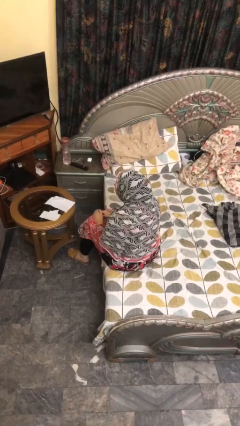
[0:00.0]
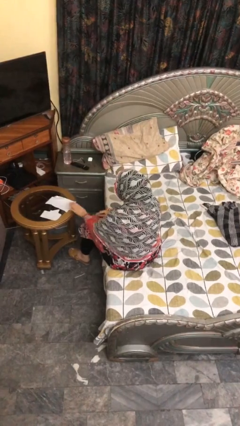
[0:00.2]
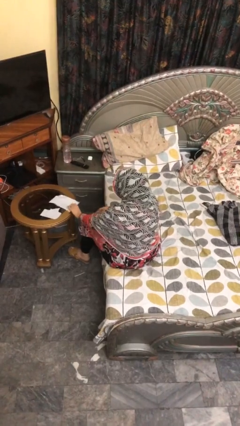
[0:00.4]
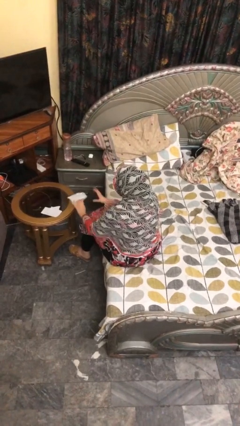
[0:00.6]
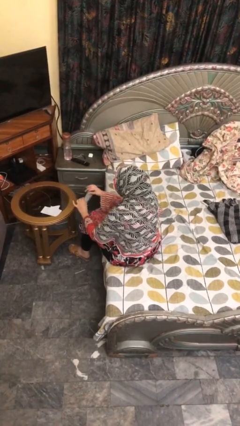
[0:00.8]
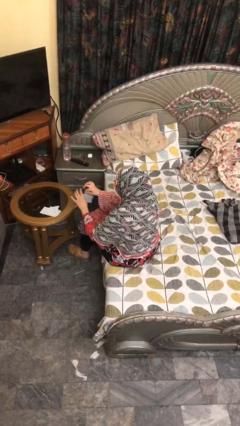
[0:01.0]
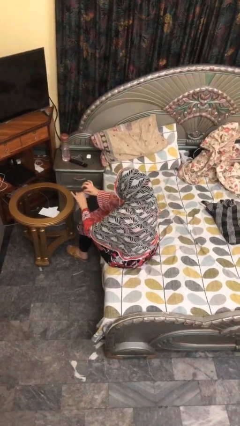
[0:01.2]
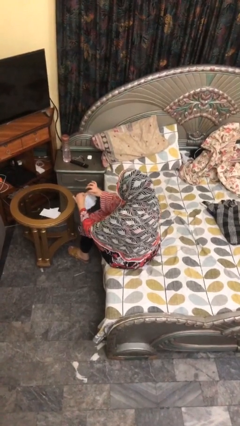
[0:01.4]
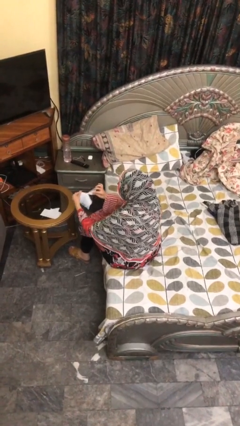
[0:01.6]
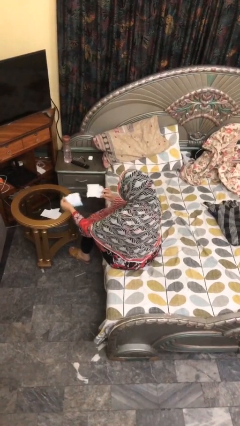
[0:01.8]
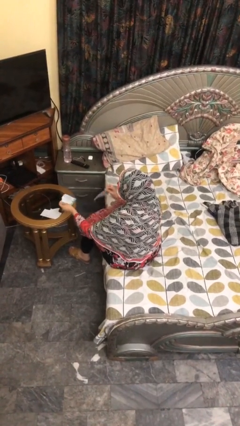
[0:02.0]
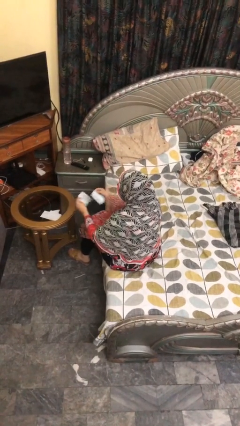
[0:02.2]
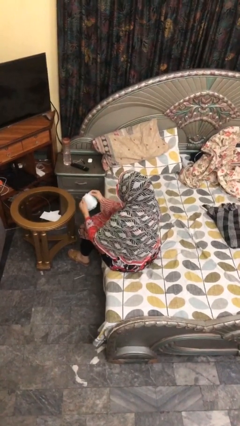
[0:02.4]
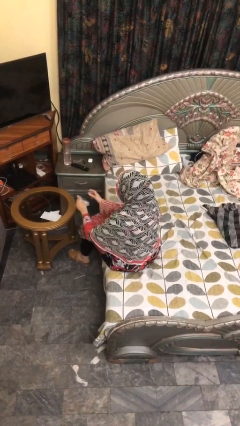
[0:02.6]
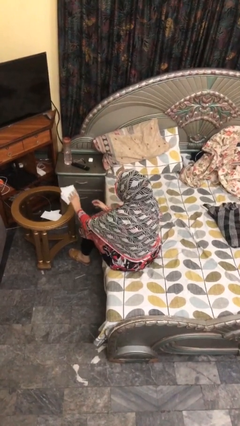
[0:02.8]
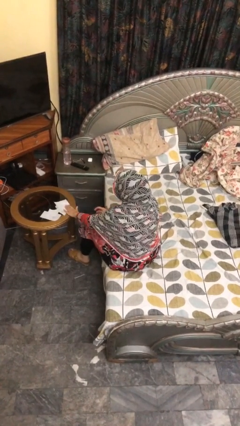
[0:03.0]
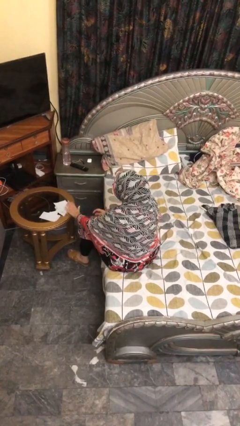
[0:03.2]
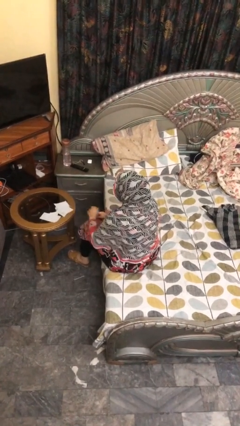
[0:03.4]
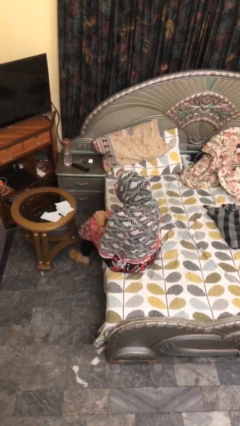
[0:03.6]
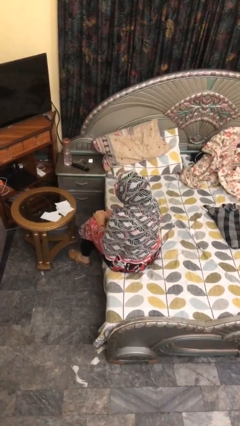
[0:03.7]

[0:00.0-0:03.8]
person tears paper

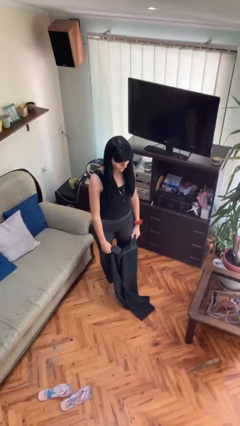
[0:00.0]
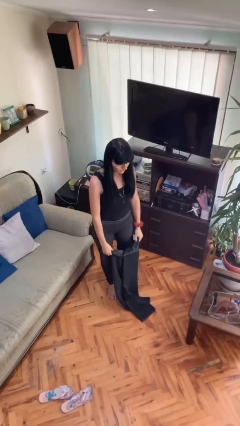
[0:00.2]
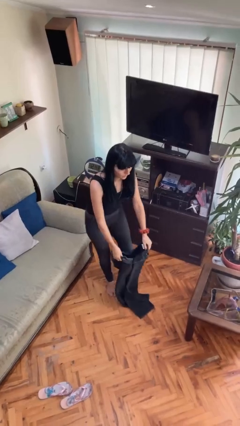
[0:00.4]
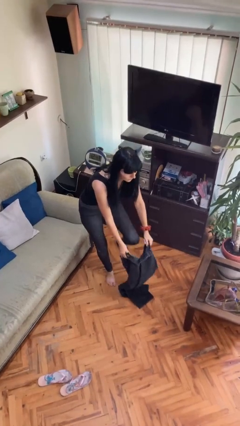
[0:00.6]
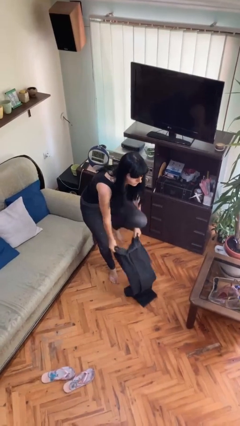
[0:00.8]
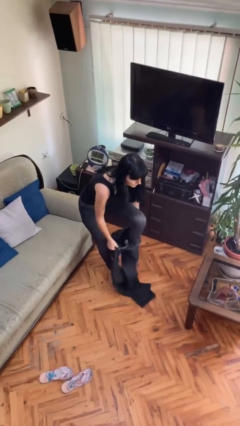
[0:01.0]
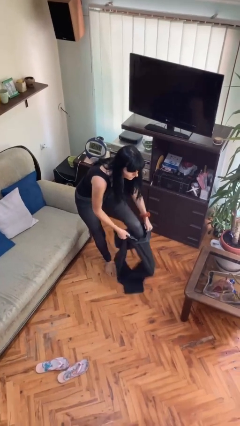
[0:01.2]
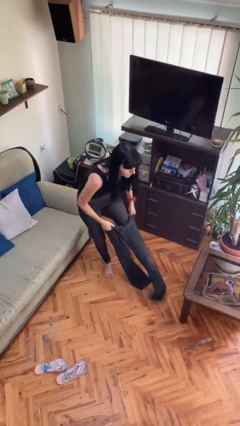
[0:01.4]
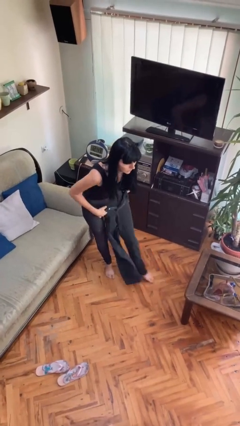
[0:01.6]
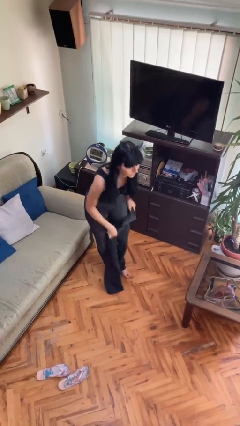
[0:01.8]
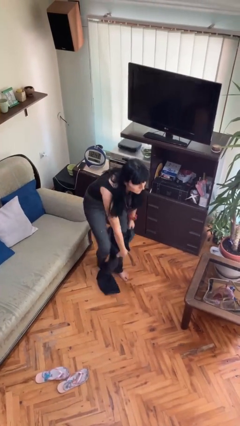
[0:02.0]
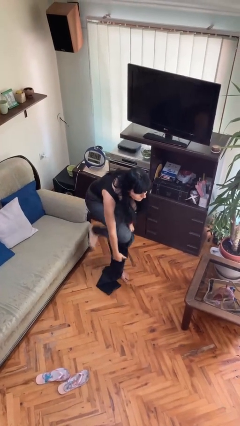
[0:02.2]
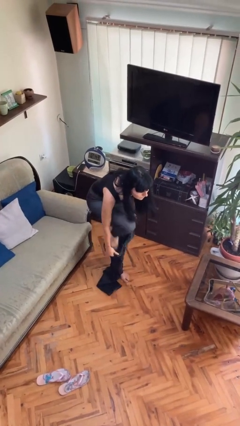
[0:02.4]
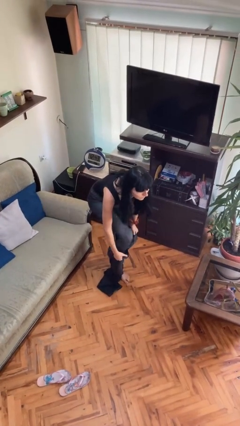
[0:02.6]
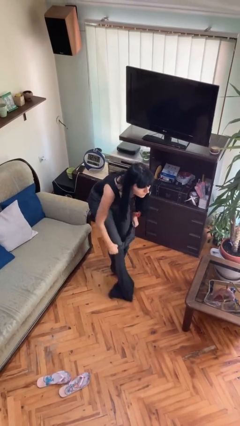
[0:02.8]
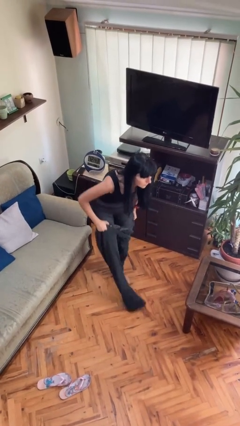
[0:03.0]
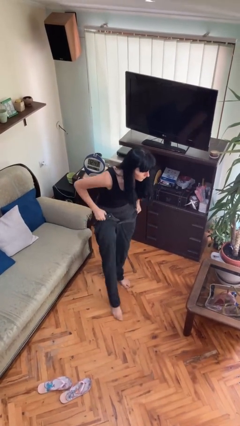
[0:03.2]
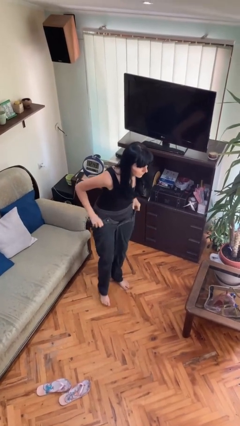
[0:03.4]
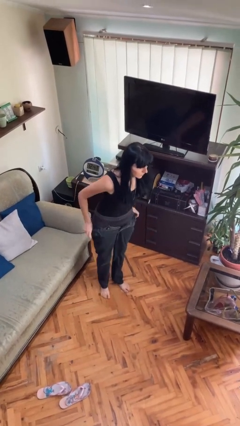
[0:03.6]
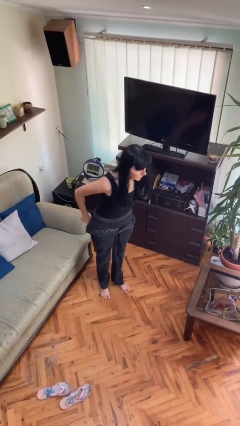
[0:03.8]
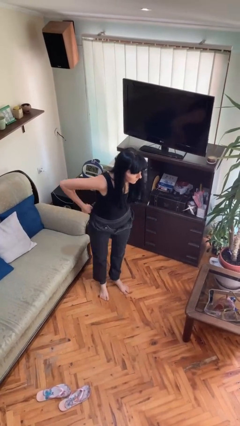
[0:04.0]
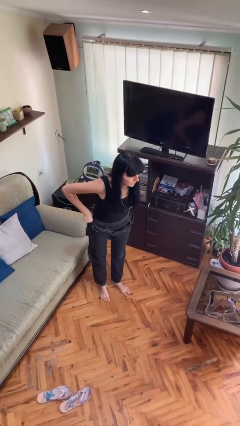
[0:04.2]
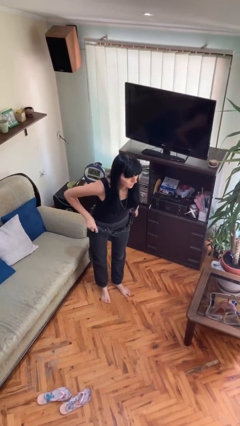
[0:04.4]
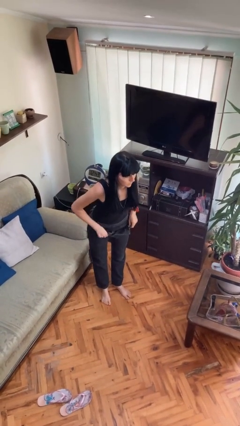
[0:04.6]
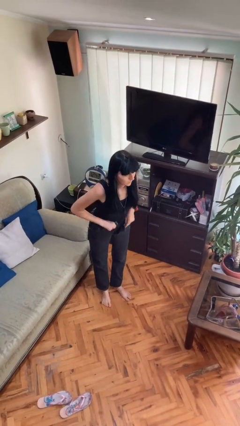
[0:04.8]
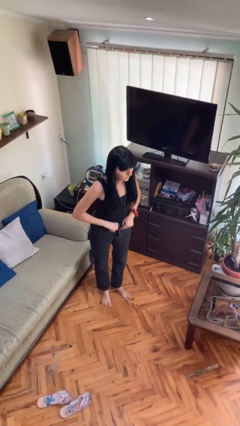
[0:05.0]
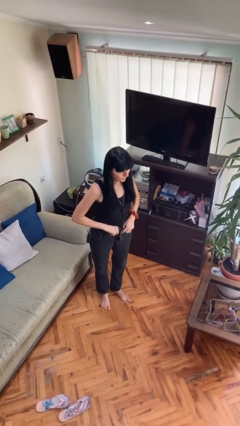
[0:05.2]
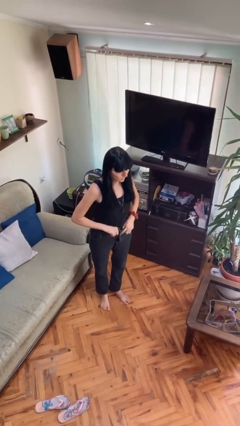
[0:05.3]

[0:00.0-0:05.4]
person puts on pants

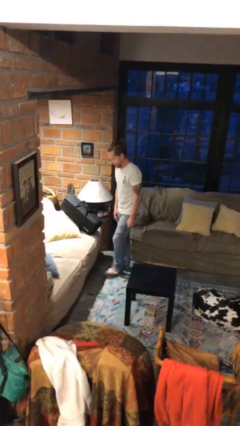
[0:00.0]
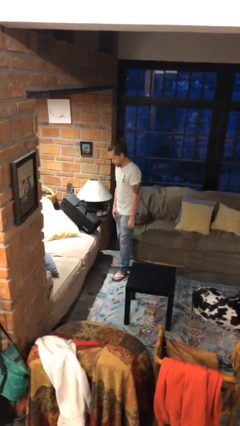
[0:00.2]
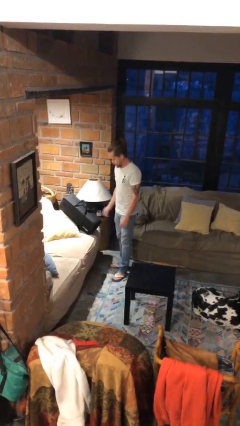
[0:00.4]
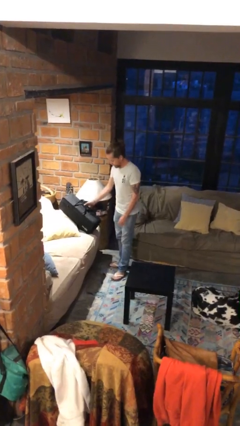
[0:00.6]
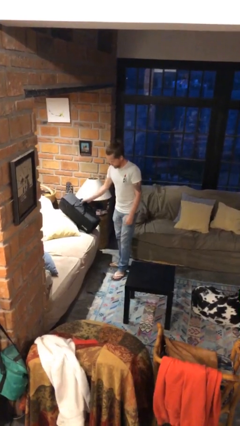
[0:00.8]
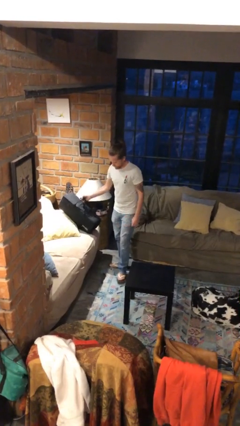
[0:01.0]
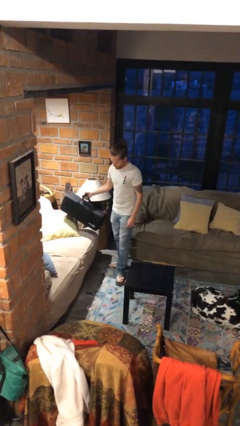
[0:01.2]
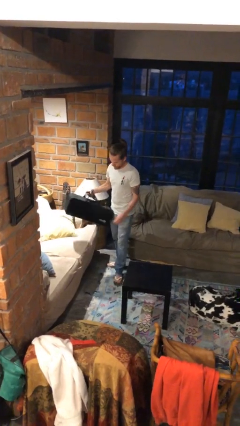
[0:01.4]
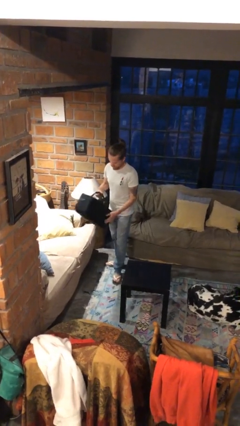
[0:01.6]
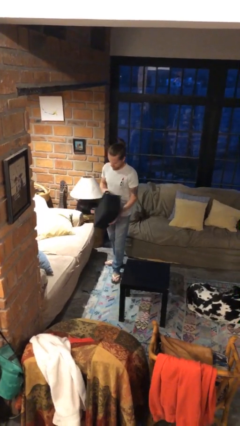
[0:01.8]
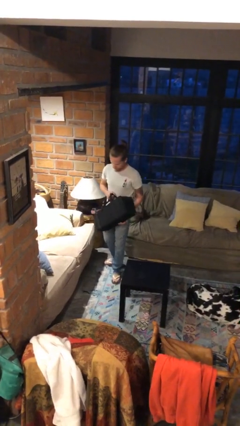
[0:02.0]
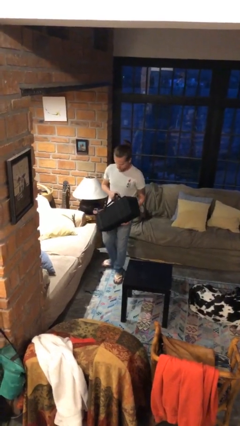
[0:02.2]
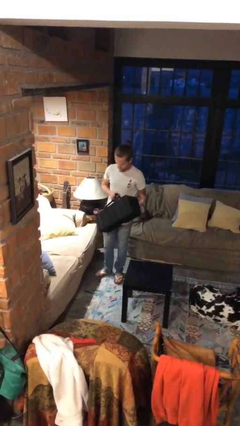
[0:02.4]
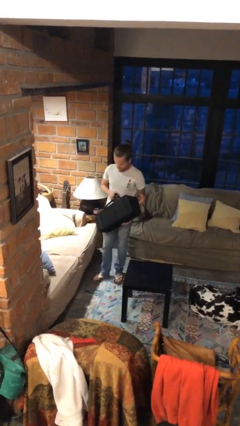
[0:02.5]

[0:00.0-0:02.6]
person picks up object from couch

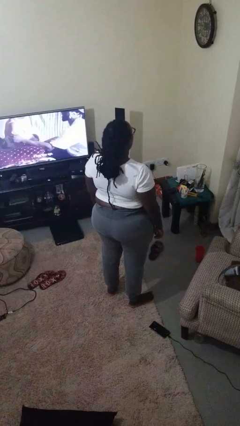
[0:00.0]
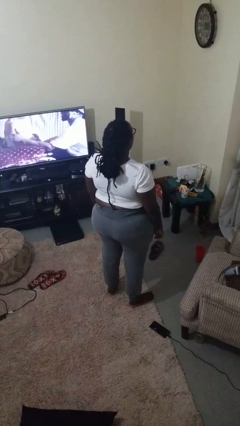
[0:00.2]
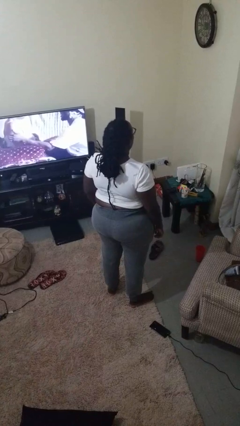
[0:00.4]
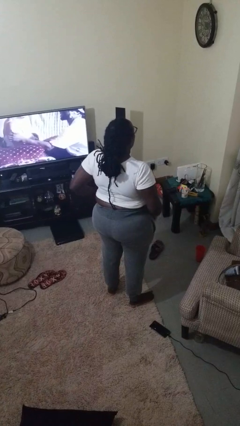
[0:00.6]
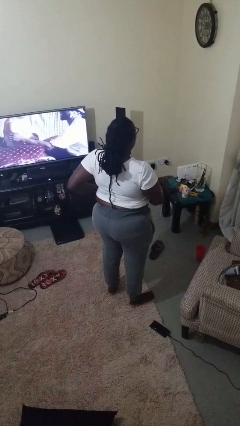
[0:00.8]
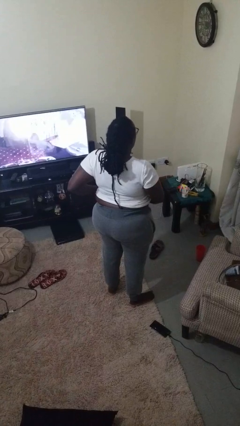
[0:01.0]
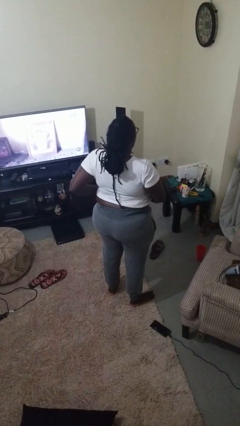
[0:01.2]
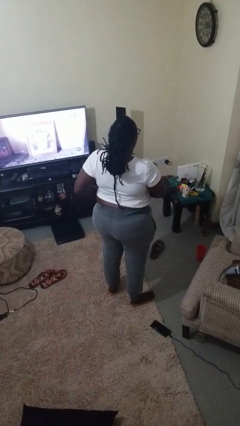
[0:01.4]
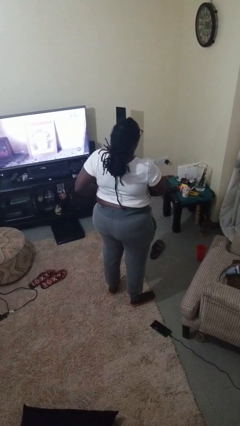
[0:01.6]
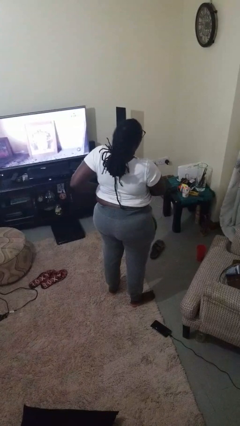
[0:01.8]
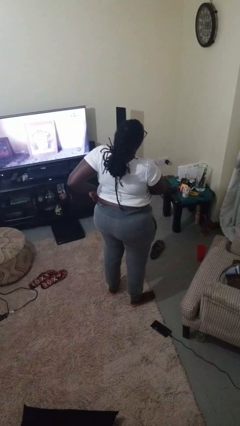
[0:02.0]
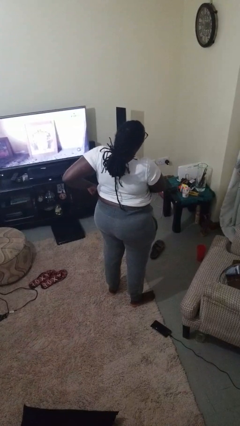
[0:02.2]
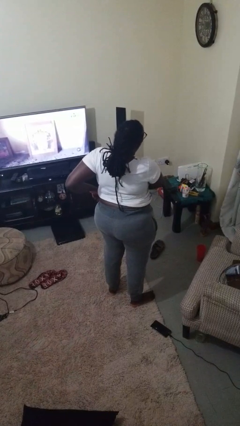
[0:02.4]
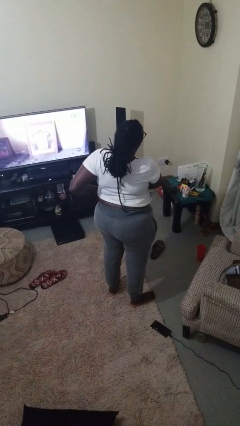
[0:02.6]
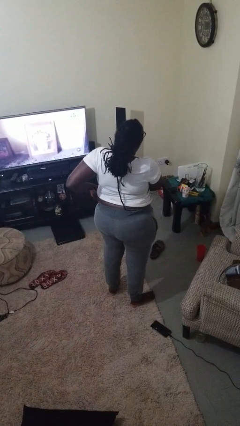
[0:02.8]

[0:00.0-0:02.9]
person hikes up pants

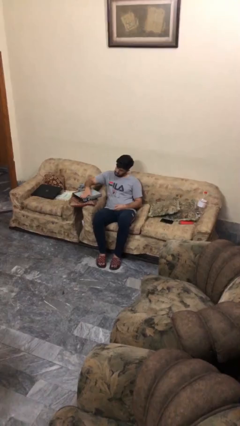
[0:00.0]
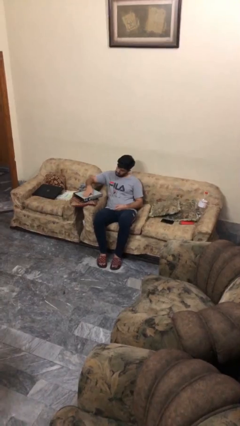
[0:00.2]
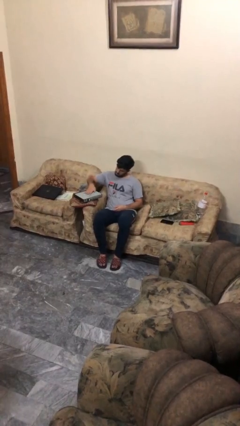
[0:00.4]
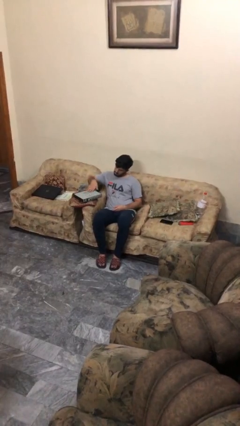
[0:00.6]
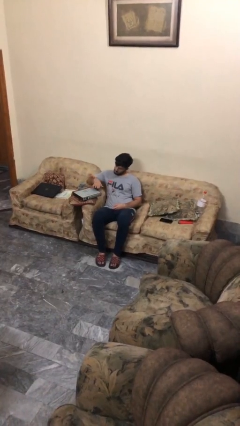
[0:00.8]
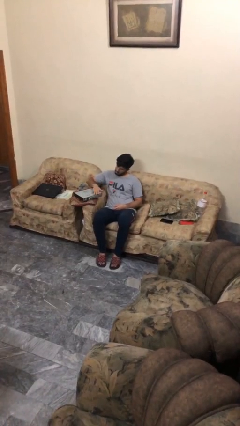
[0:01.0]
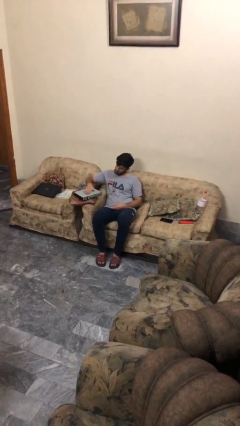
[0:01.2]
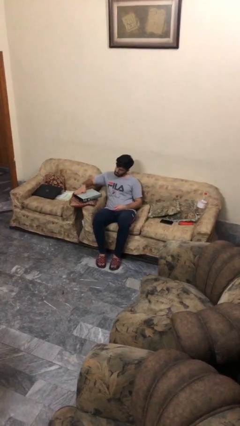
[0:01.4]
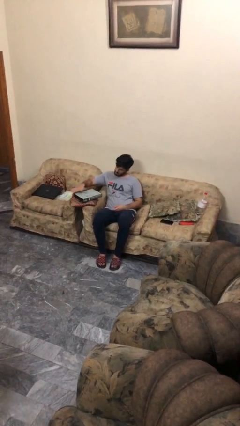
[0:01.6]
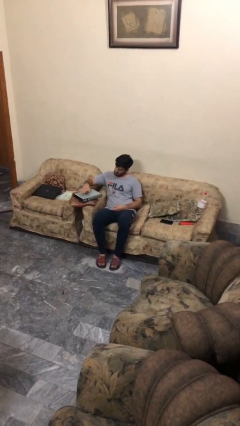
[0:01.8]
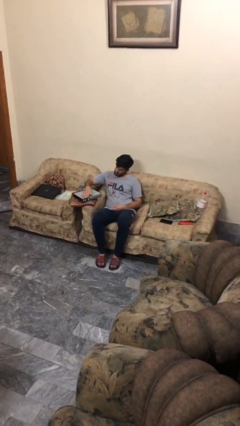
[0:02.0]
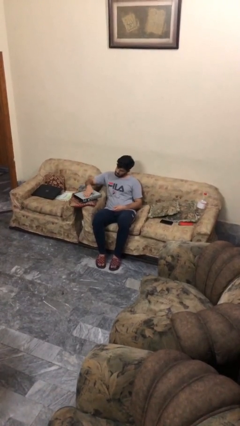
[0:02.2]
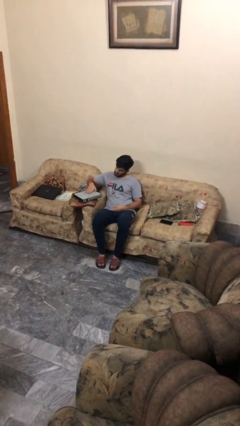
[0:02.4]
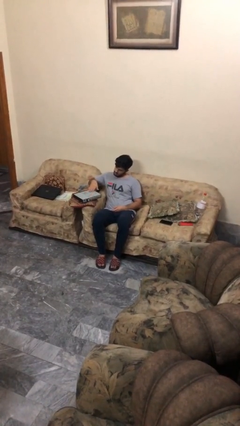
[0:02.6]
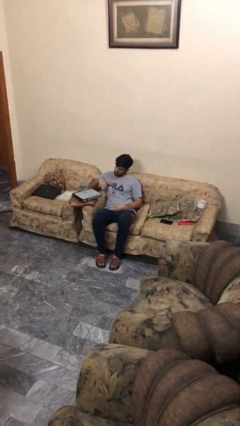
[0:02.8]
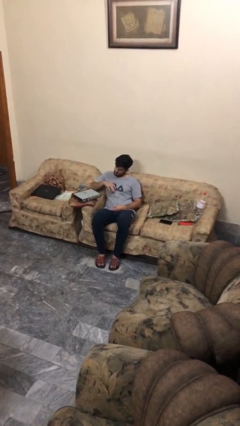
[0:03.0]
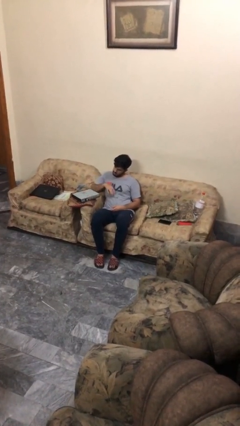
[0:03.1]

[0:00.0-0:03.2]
person waves hand over object
